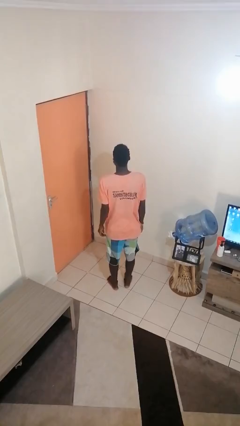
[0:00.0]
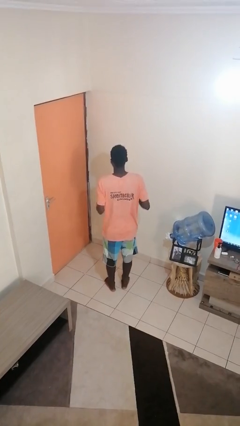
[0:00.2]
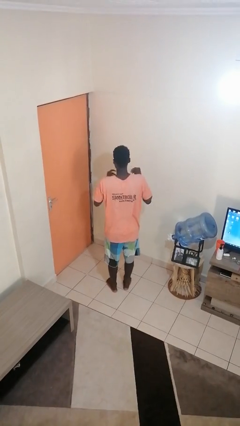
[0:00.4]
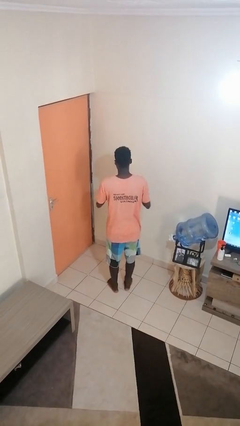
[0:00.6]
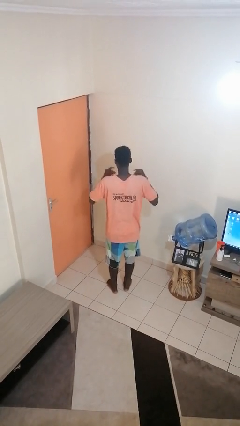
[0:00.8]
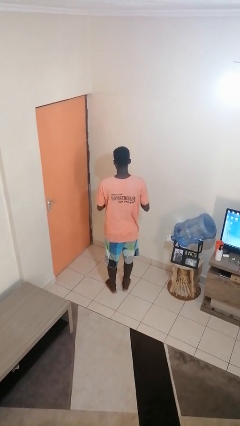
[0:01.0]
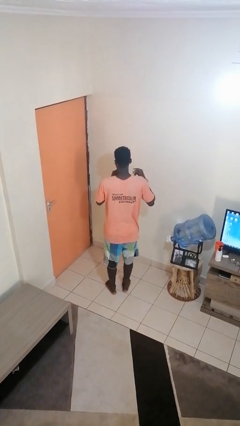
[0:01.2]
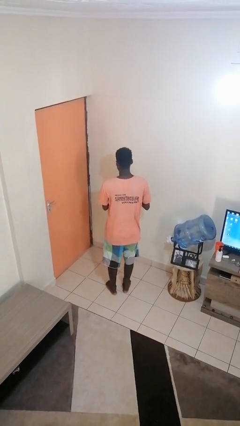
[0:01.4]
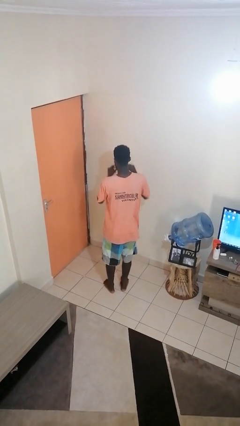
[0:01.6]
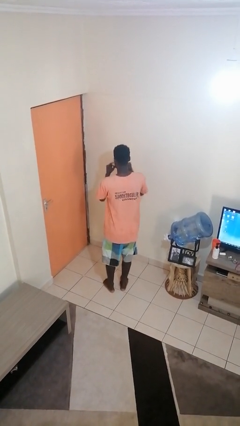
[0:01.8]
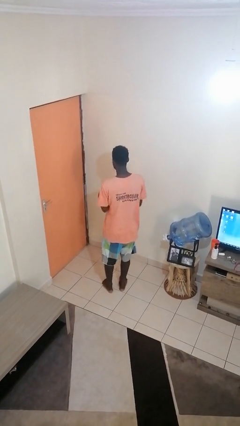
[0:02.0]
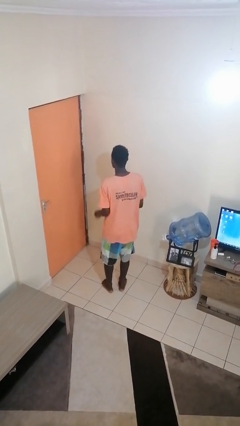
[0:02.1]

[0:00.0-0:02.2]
person snaps fingers

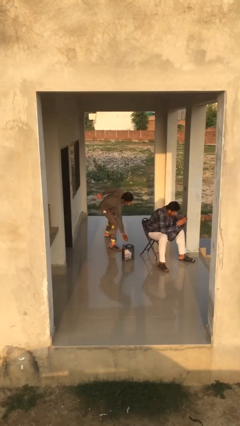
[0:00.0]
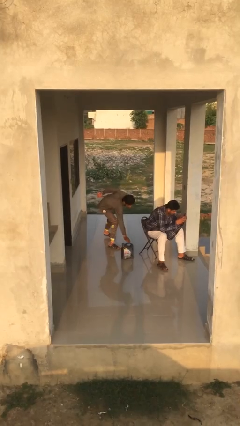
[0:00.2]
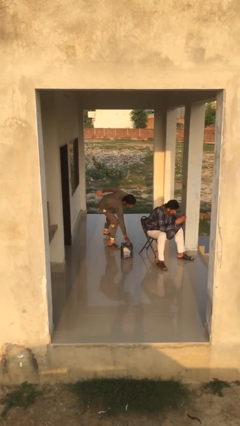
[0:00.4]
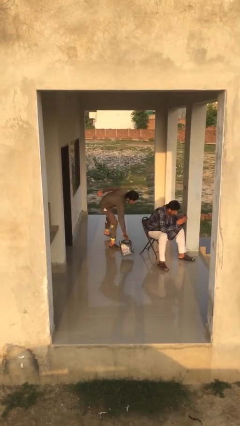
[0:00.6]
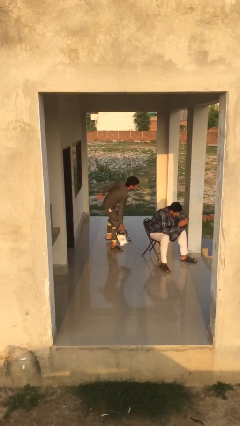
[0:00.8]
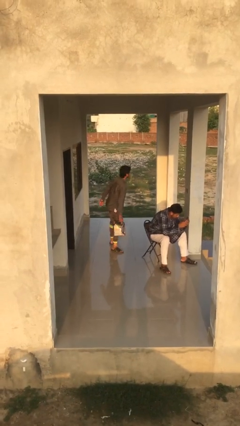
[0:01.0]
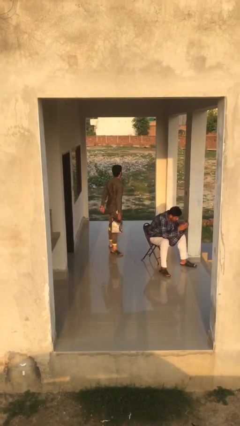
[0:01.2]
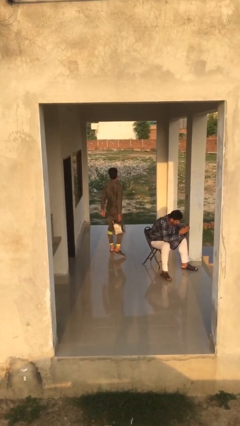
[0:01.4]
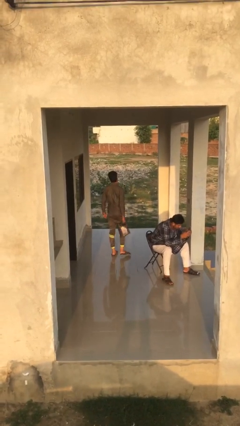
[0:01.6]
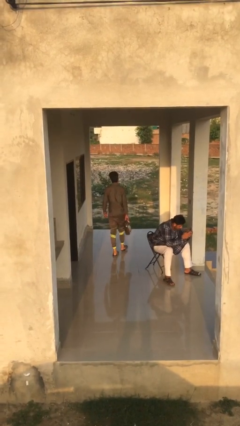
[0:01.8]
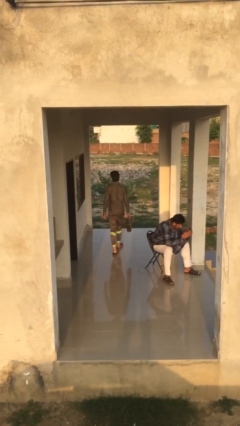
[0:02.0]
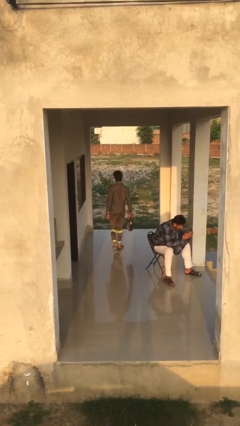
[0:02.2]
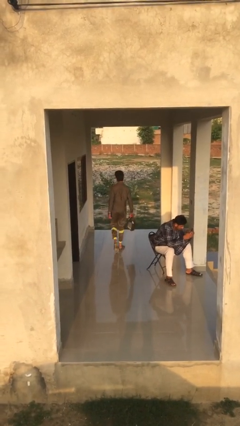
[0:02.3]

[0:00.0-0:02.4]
person steals object from person

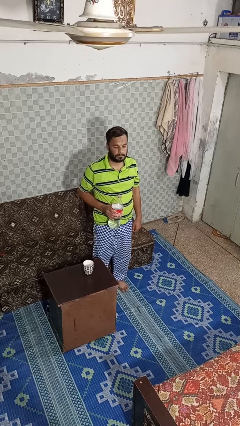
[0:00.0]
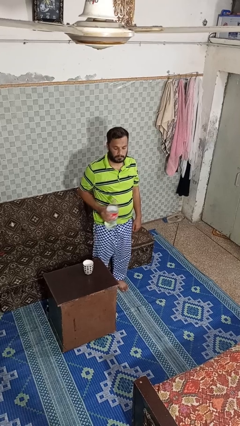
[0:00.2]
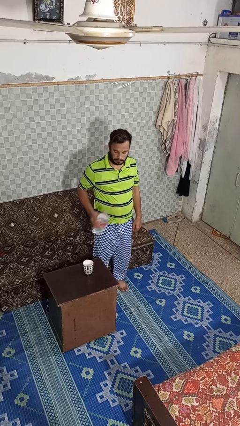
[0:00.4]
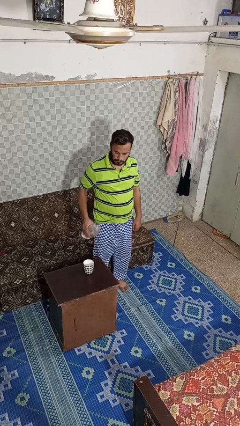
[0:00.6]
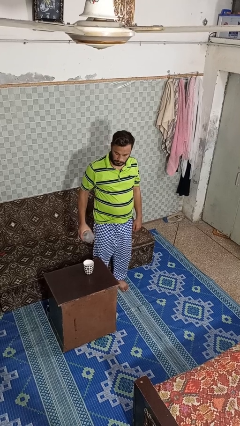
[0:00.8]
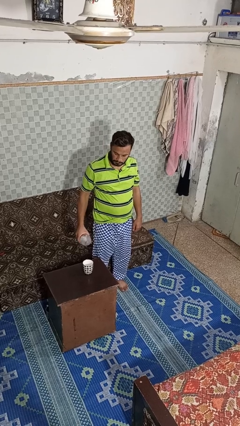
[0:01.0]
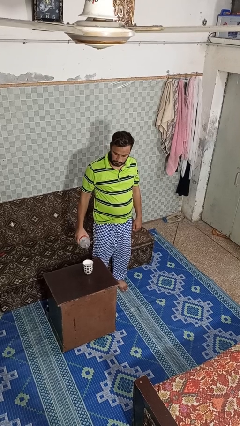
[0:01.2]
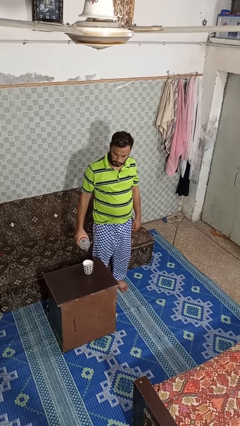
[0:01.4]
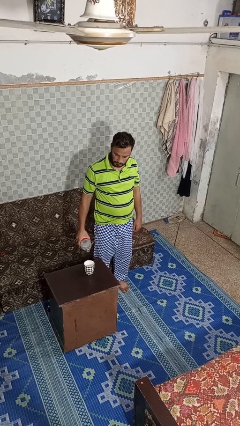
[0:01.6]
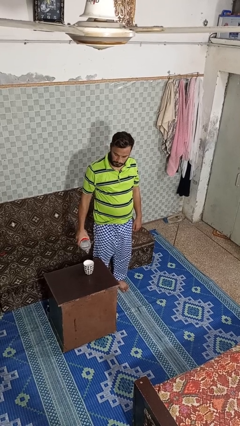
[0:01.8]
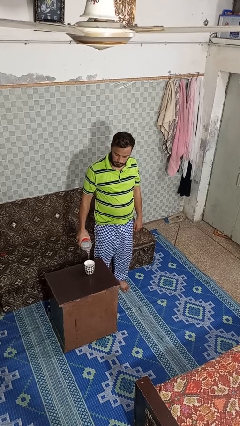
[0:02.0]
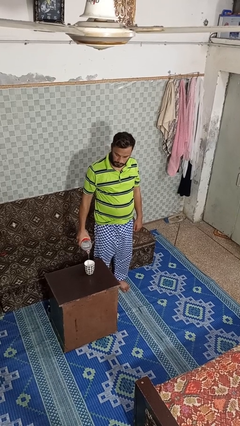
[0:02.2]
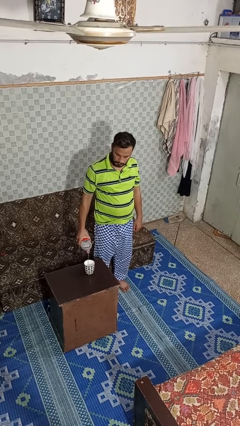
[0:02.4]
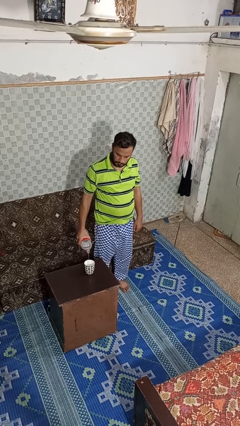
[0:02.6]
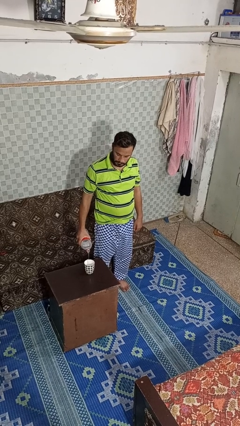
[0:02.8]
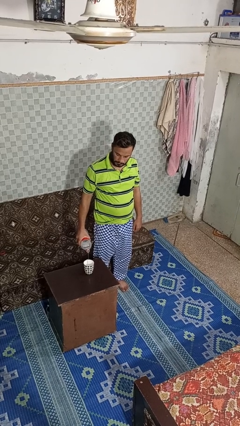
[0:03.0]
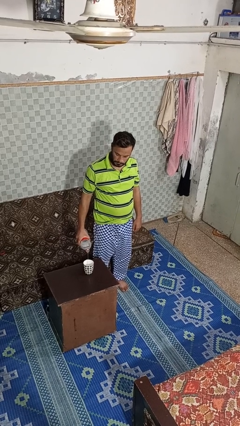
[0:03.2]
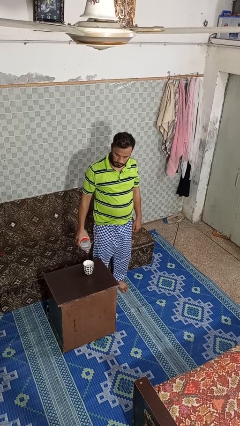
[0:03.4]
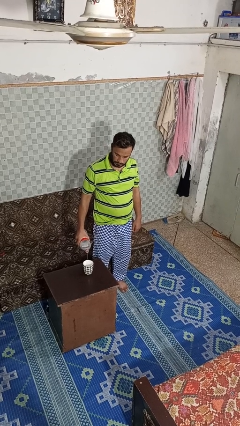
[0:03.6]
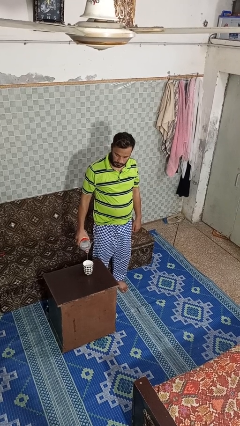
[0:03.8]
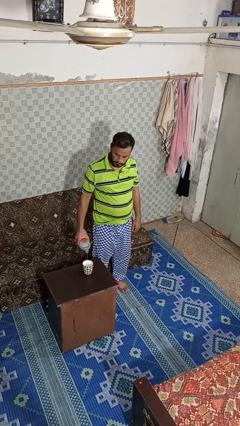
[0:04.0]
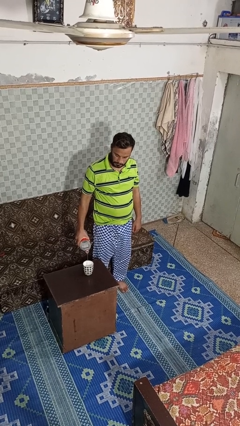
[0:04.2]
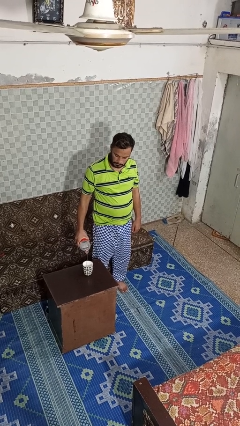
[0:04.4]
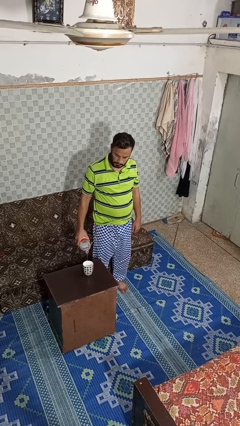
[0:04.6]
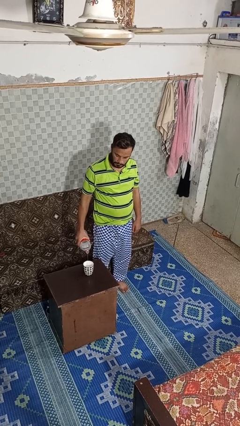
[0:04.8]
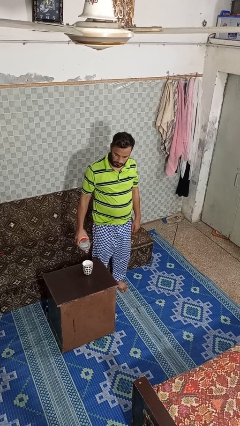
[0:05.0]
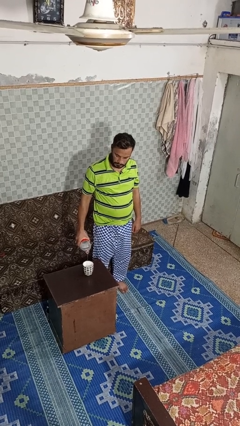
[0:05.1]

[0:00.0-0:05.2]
person pours liquid into cup

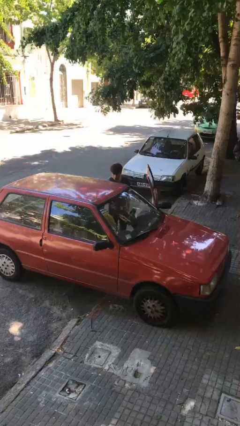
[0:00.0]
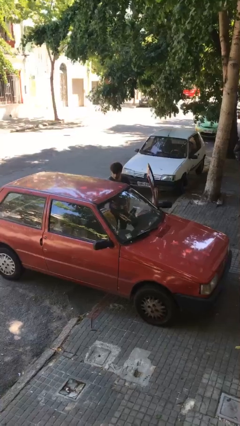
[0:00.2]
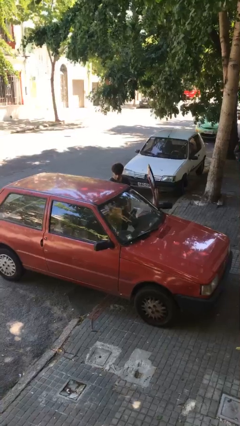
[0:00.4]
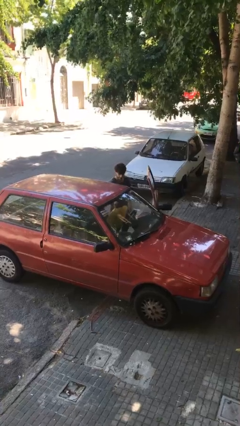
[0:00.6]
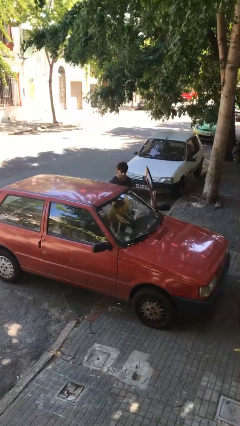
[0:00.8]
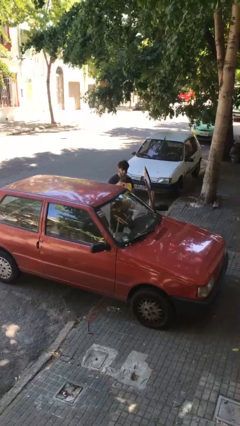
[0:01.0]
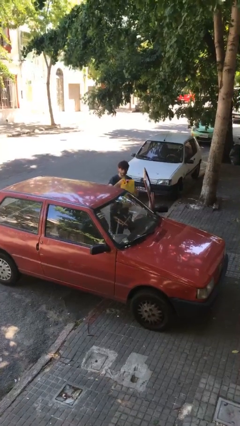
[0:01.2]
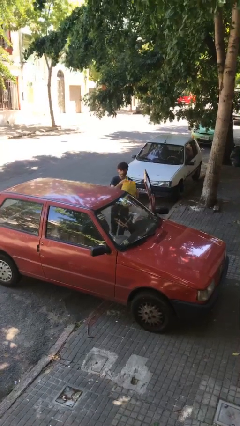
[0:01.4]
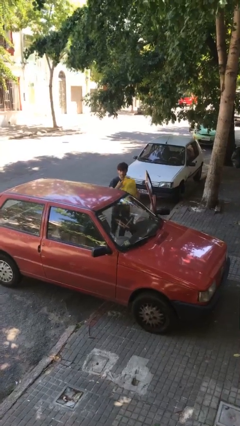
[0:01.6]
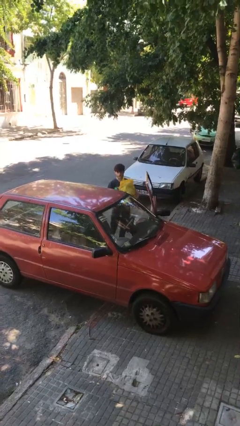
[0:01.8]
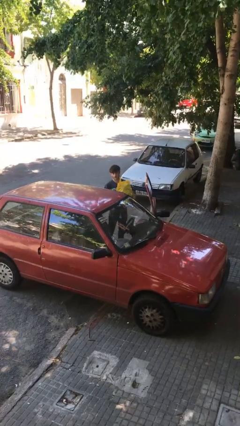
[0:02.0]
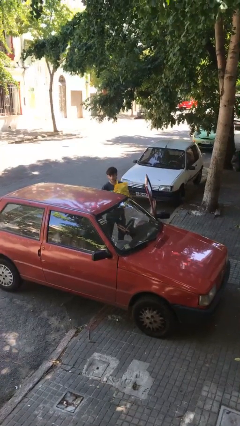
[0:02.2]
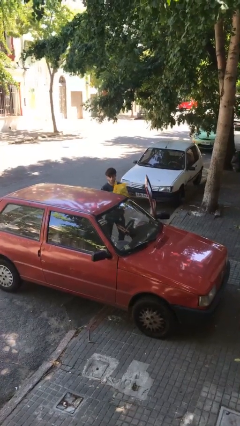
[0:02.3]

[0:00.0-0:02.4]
person unloads car

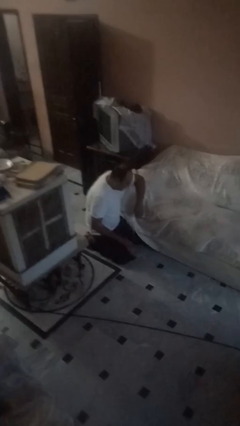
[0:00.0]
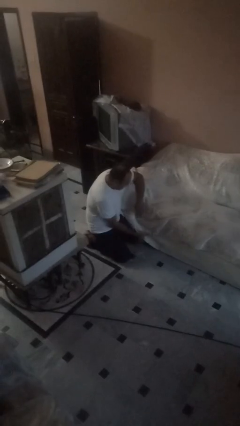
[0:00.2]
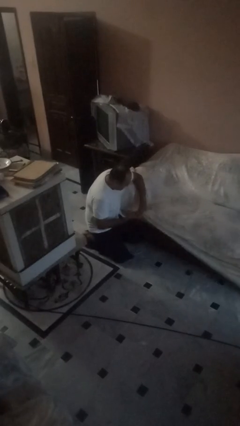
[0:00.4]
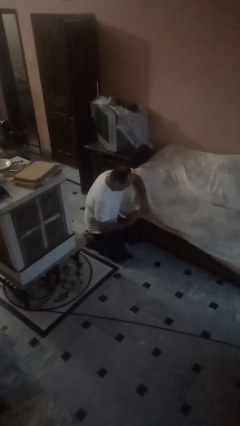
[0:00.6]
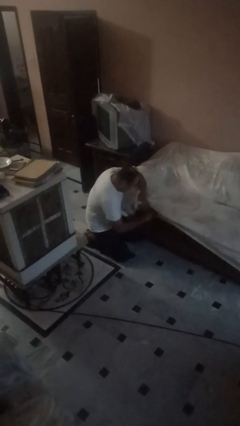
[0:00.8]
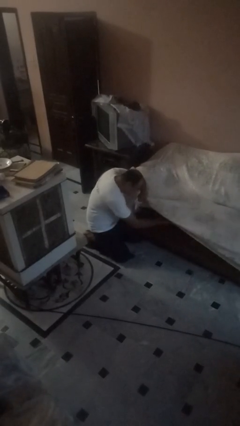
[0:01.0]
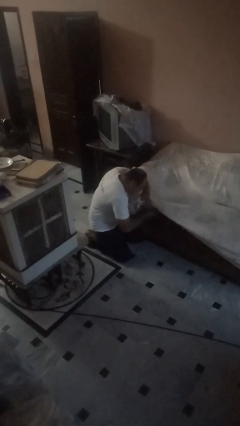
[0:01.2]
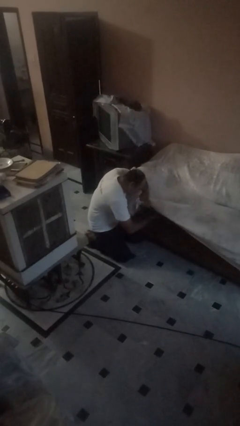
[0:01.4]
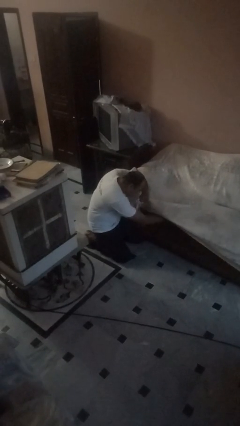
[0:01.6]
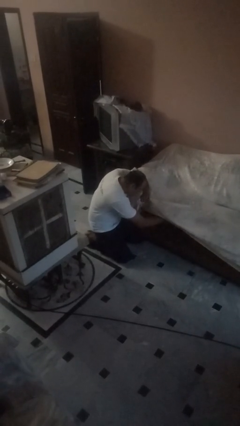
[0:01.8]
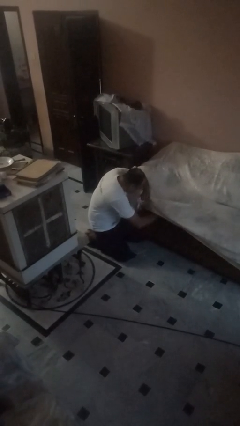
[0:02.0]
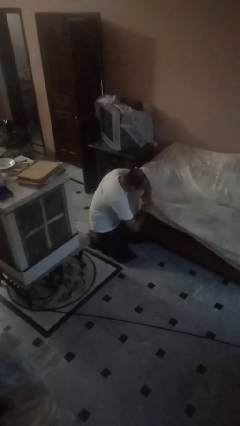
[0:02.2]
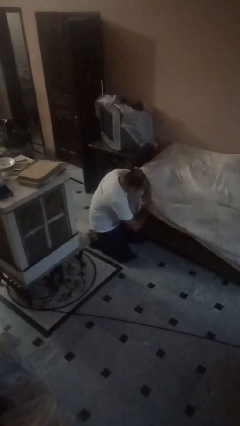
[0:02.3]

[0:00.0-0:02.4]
person searches in couch

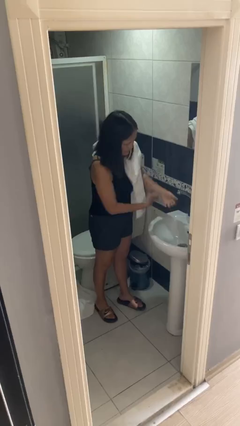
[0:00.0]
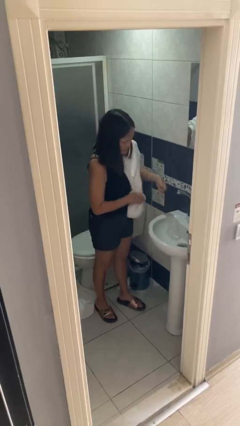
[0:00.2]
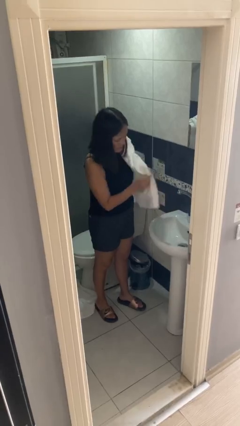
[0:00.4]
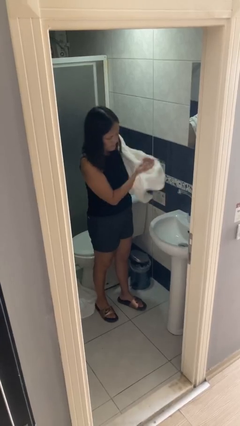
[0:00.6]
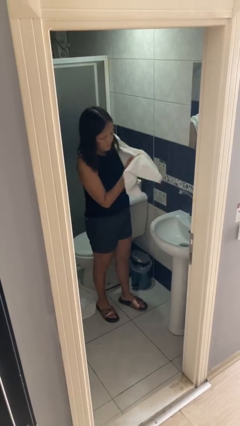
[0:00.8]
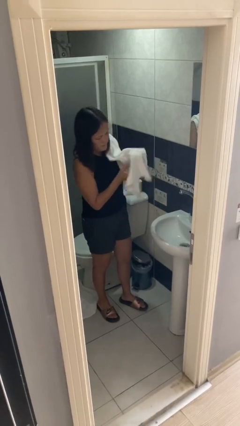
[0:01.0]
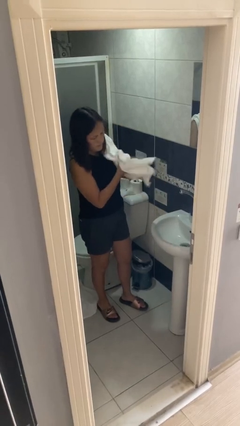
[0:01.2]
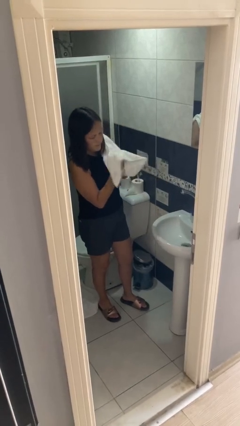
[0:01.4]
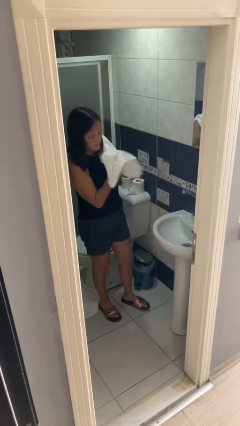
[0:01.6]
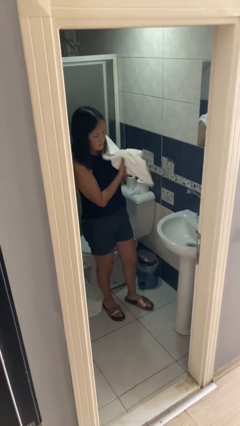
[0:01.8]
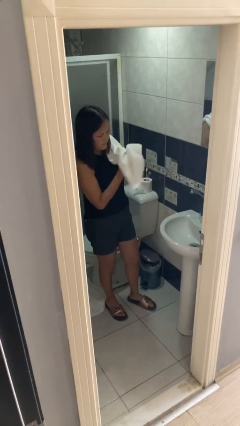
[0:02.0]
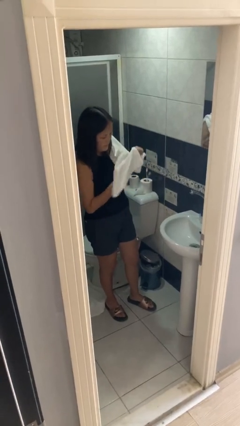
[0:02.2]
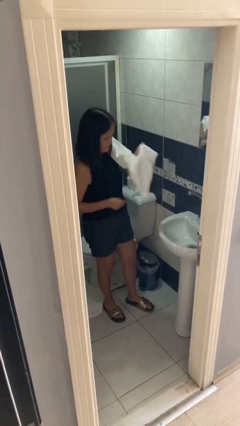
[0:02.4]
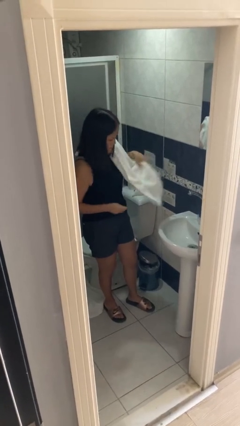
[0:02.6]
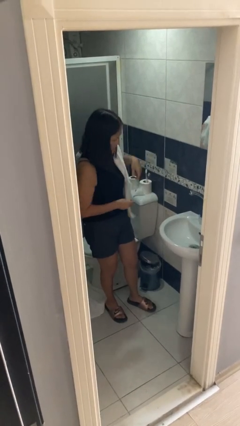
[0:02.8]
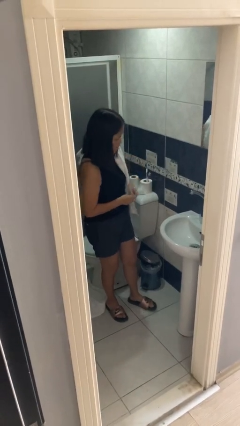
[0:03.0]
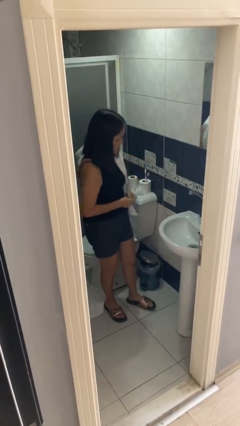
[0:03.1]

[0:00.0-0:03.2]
person dries hands with towel
